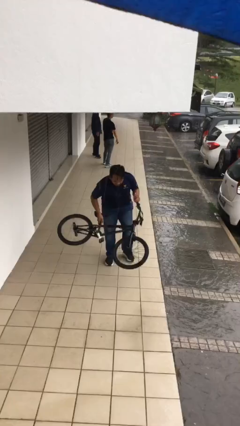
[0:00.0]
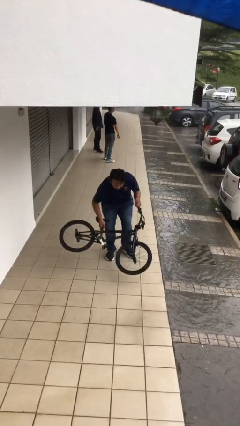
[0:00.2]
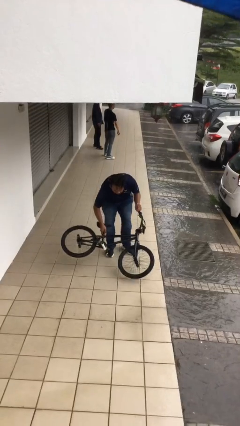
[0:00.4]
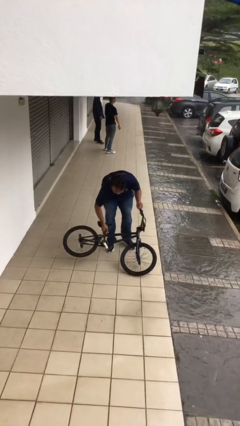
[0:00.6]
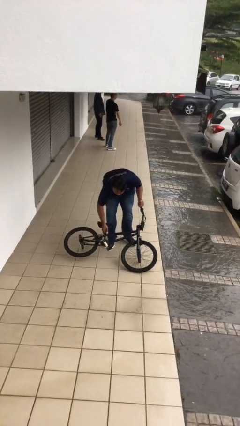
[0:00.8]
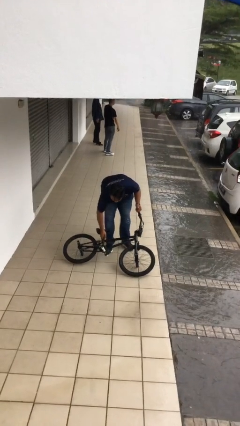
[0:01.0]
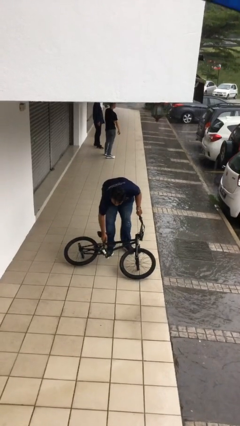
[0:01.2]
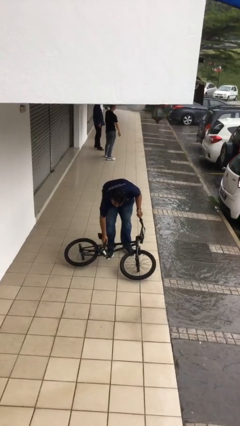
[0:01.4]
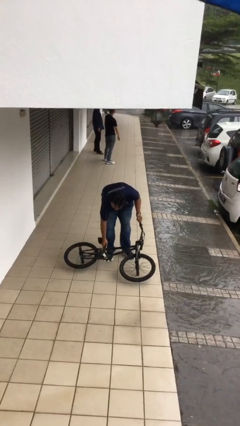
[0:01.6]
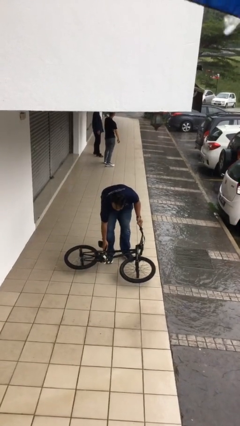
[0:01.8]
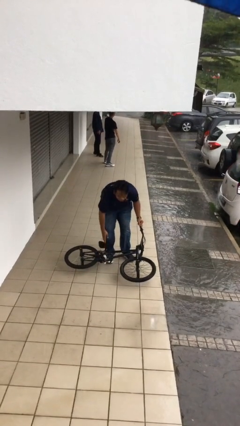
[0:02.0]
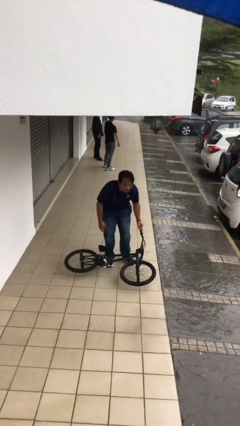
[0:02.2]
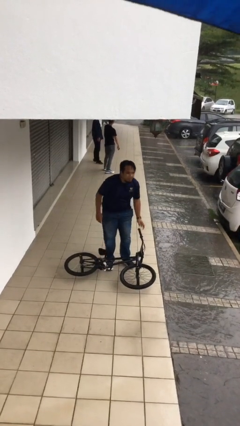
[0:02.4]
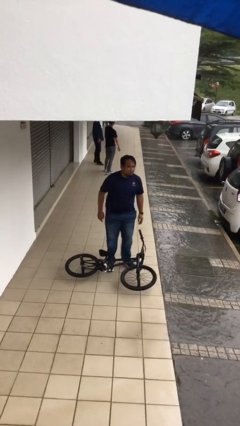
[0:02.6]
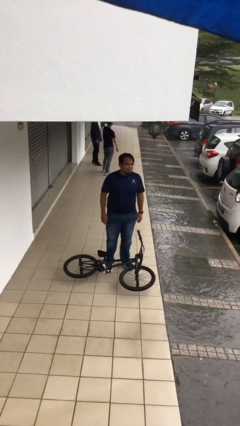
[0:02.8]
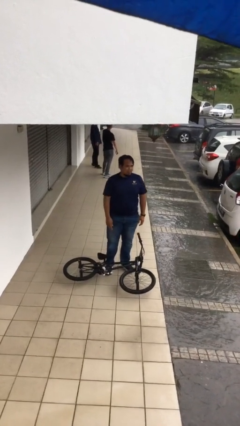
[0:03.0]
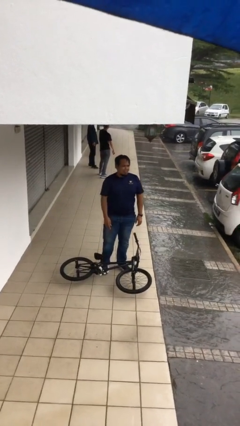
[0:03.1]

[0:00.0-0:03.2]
person puts down object on floor

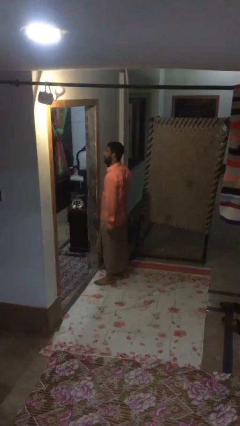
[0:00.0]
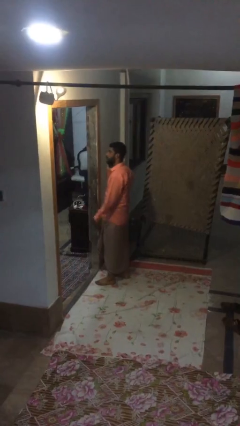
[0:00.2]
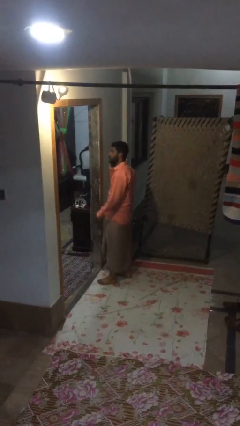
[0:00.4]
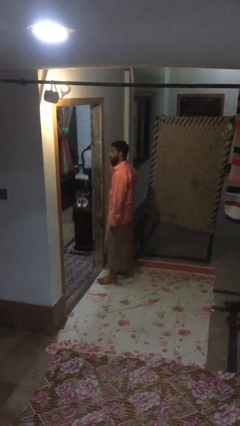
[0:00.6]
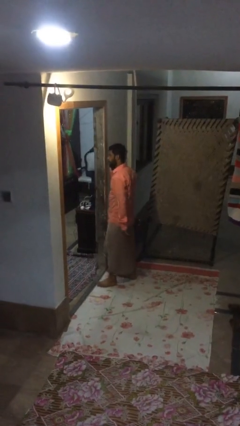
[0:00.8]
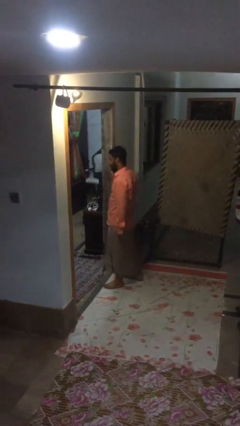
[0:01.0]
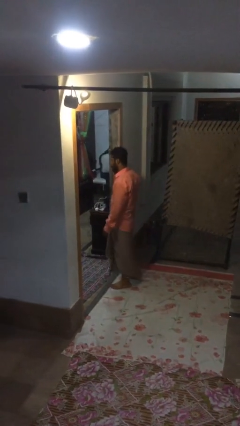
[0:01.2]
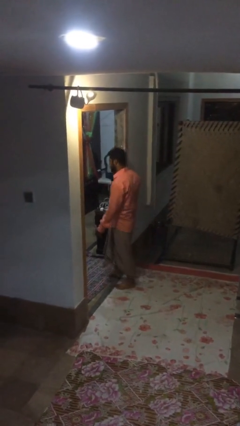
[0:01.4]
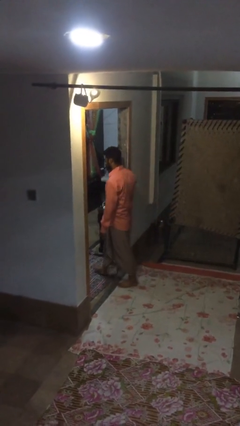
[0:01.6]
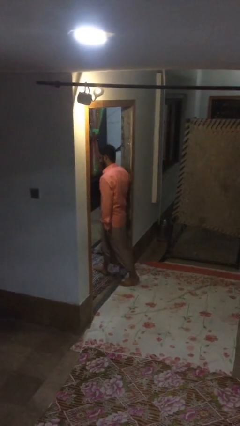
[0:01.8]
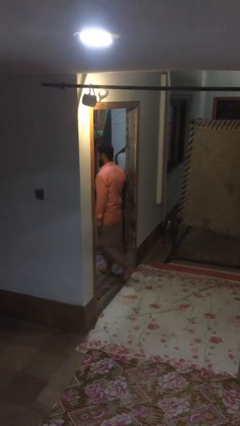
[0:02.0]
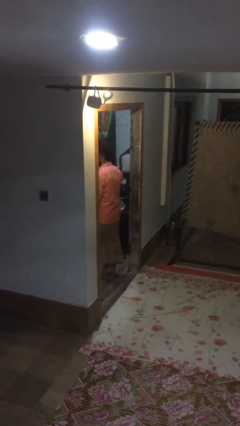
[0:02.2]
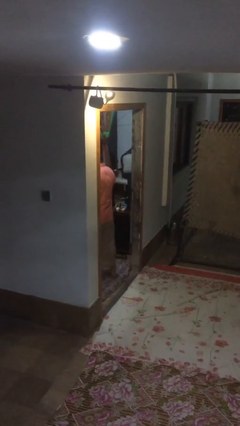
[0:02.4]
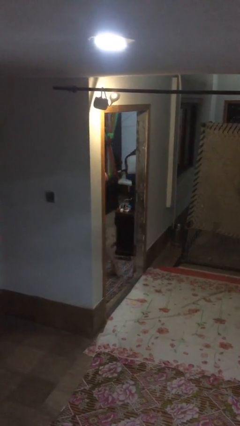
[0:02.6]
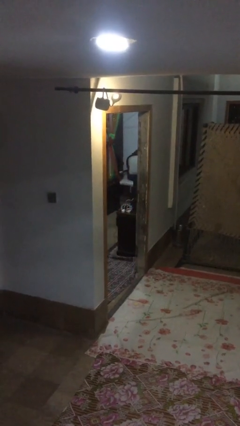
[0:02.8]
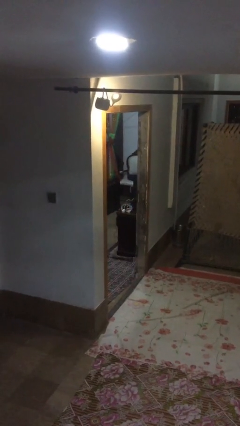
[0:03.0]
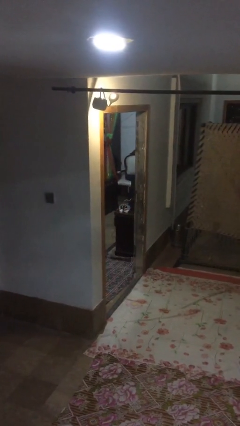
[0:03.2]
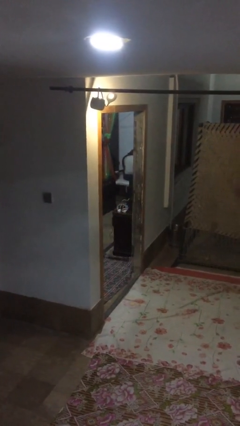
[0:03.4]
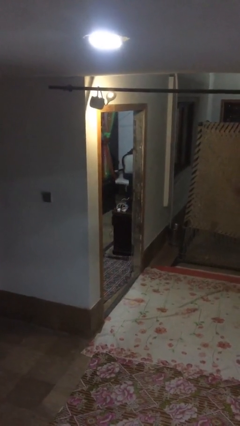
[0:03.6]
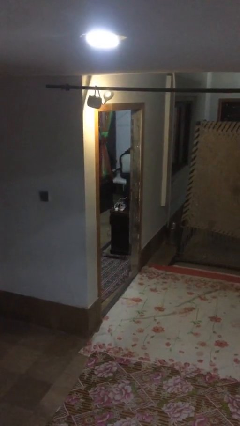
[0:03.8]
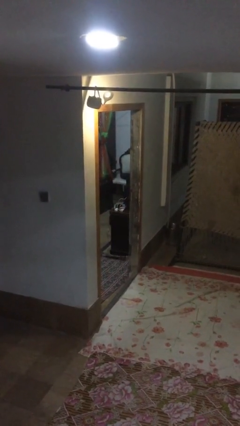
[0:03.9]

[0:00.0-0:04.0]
person exits scene through structure

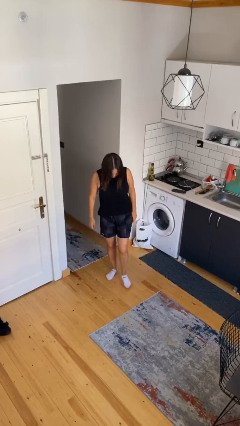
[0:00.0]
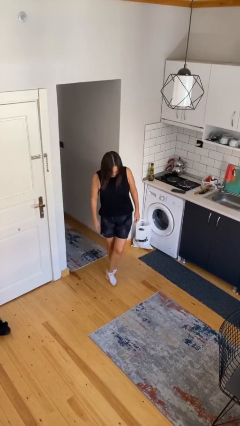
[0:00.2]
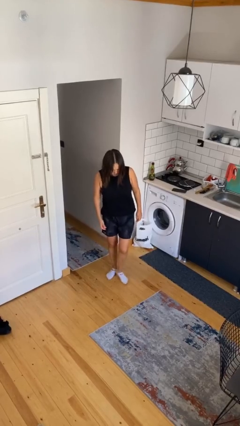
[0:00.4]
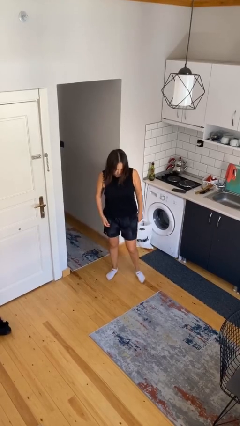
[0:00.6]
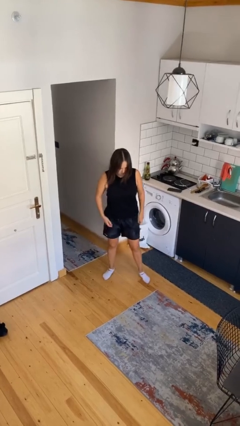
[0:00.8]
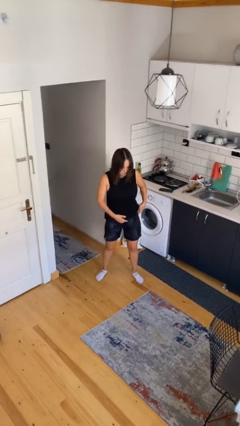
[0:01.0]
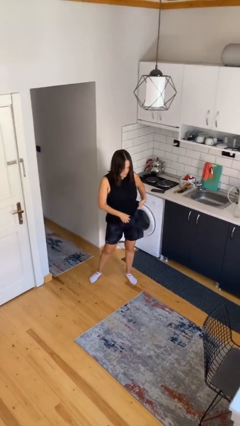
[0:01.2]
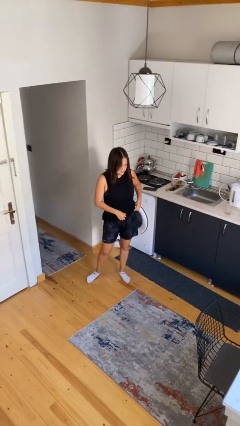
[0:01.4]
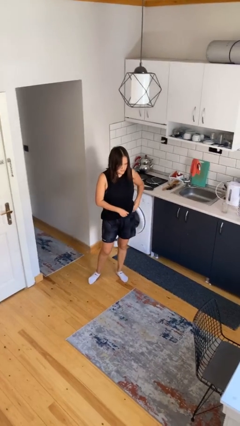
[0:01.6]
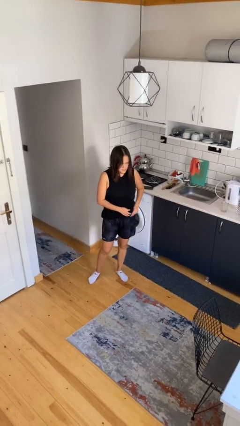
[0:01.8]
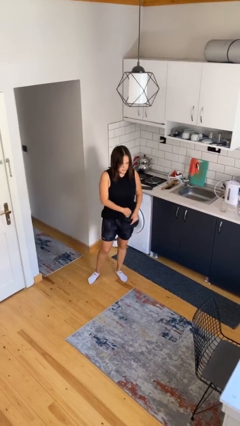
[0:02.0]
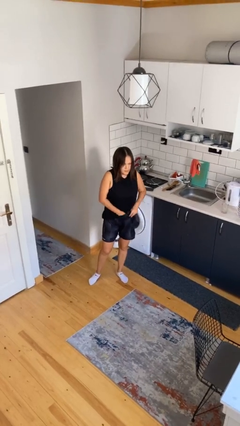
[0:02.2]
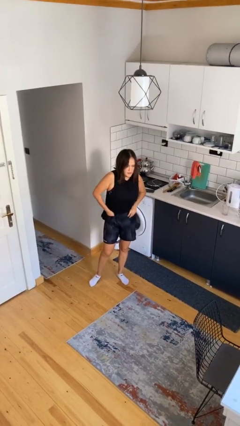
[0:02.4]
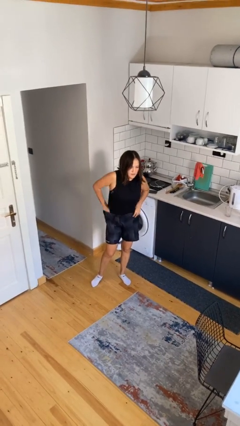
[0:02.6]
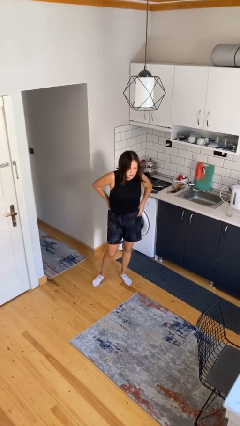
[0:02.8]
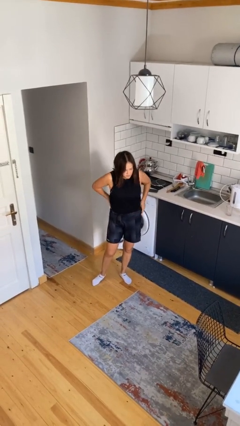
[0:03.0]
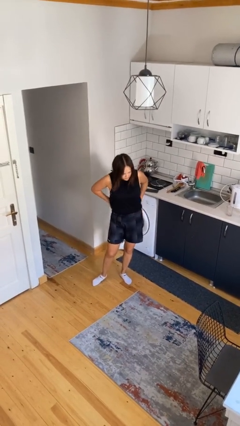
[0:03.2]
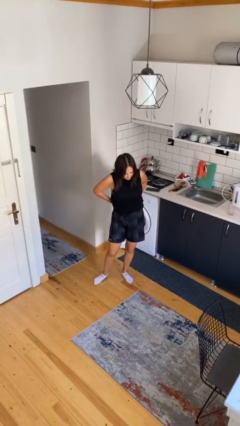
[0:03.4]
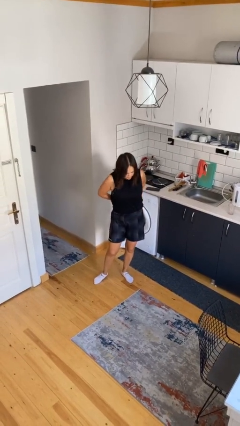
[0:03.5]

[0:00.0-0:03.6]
person tucks in shirt

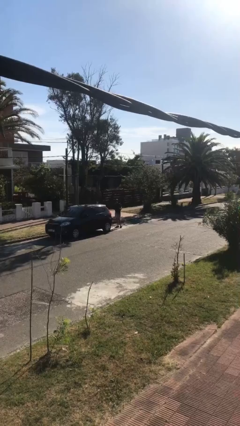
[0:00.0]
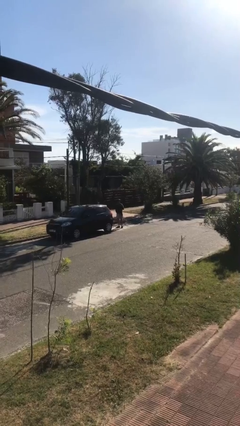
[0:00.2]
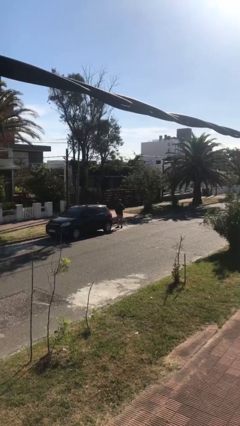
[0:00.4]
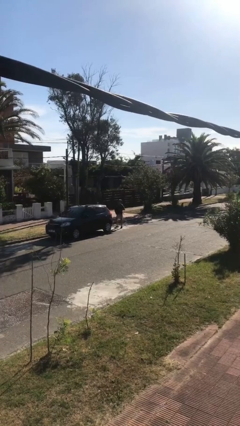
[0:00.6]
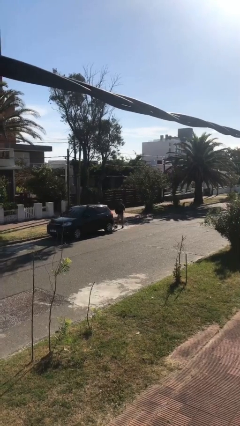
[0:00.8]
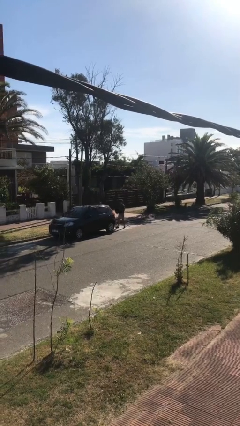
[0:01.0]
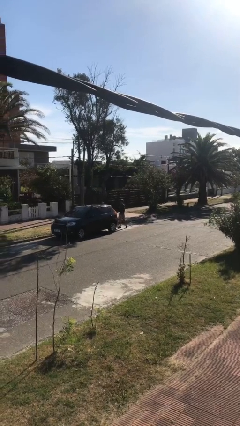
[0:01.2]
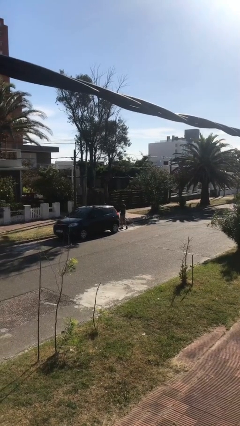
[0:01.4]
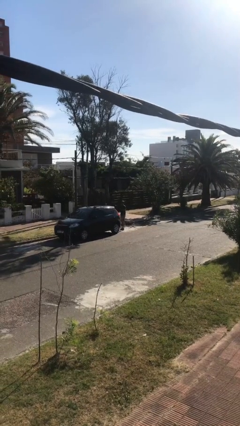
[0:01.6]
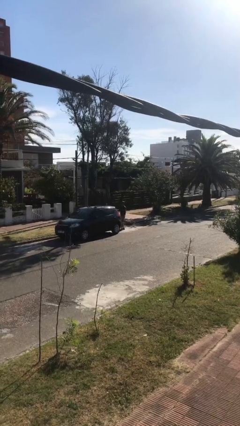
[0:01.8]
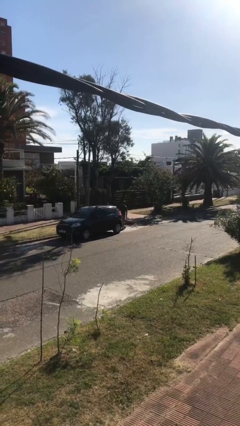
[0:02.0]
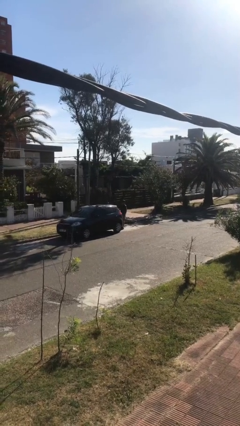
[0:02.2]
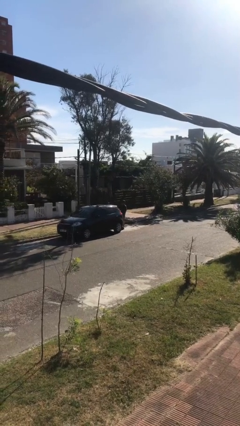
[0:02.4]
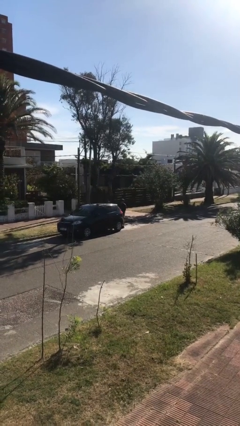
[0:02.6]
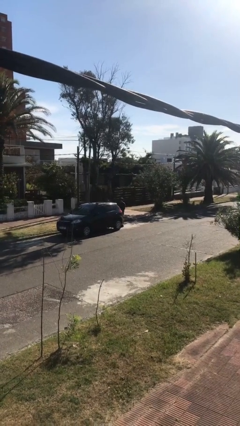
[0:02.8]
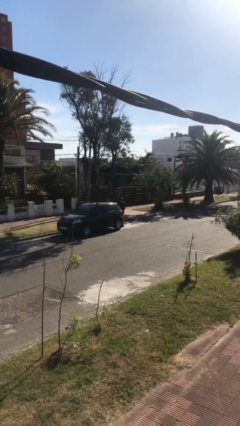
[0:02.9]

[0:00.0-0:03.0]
person loads car

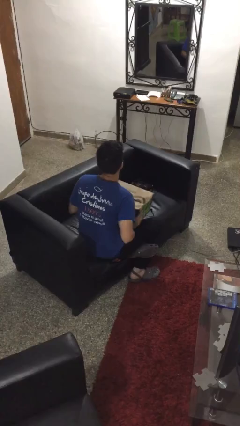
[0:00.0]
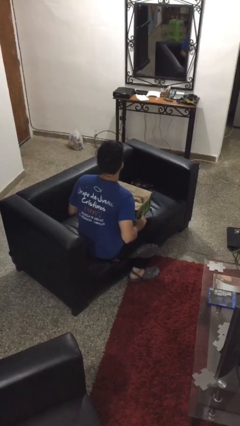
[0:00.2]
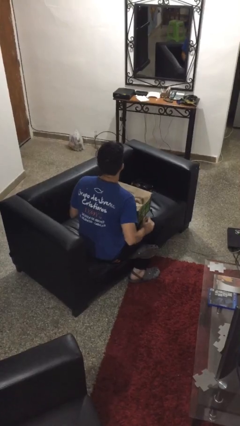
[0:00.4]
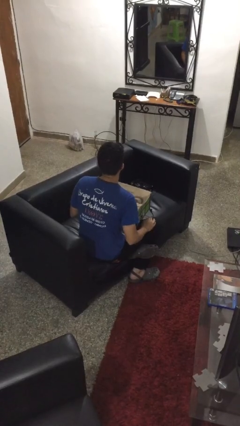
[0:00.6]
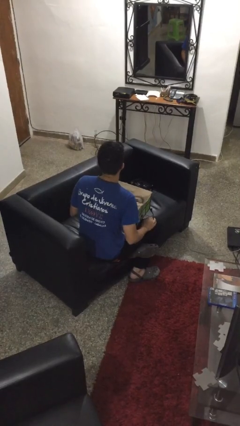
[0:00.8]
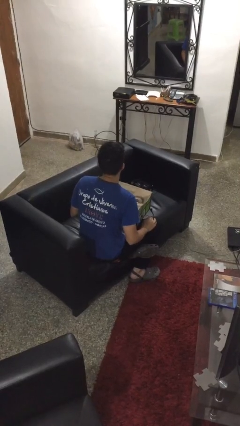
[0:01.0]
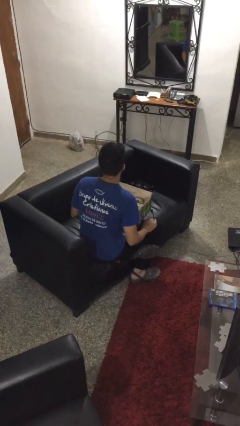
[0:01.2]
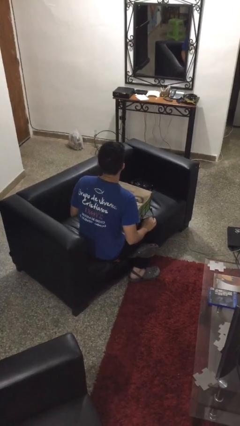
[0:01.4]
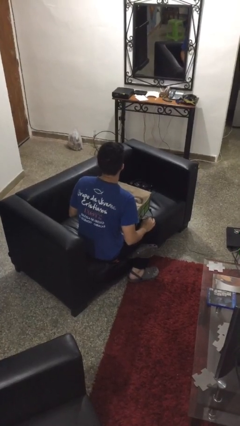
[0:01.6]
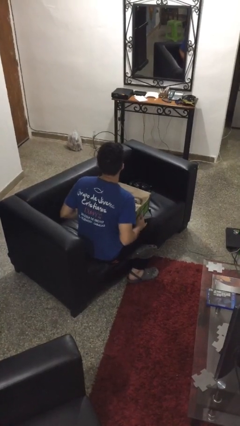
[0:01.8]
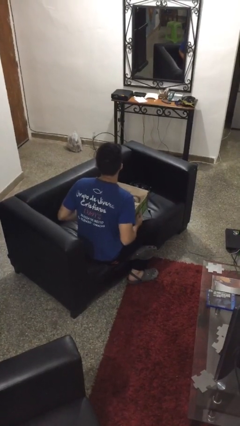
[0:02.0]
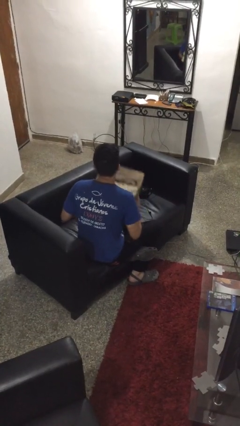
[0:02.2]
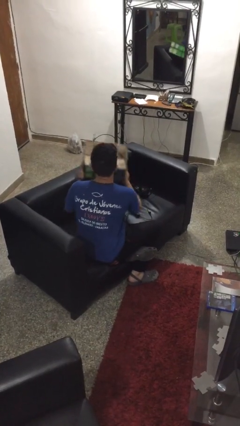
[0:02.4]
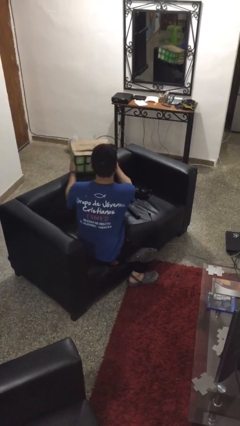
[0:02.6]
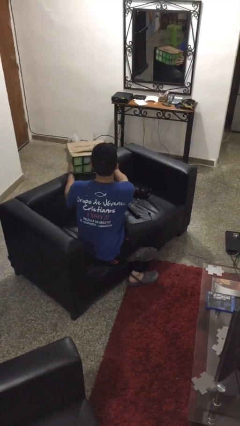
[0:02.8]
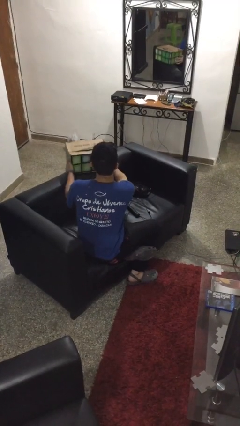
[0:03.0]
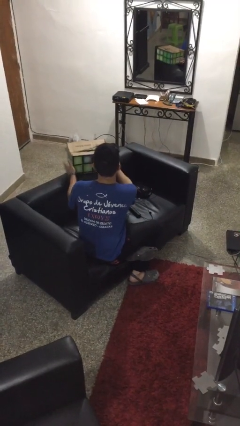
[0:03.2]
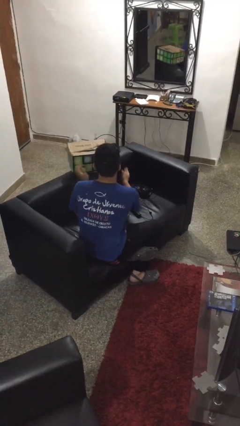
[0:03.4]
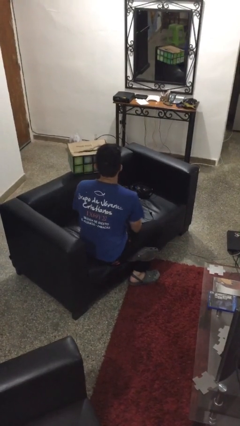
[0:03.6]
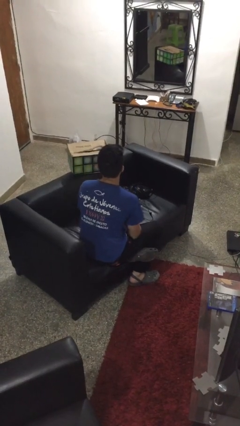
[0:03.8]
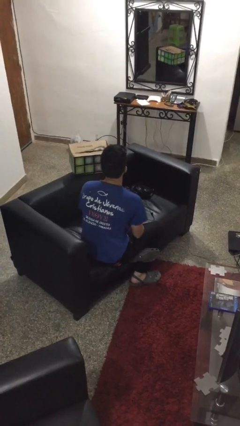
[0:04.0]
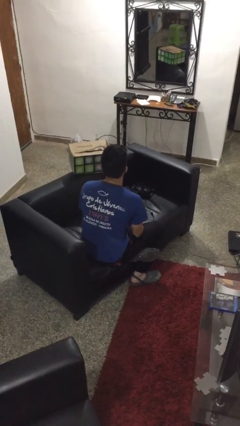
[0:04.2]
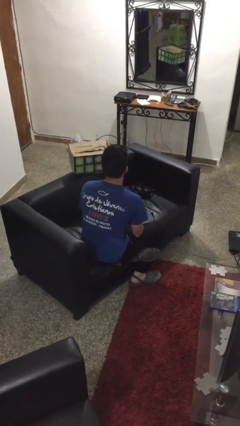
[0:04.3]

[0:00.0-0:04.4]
person puts down object on couch
